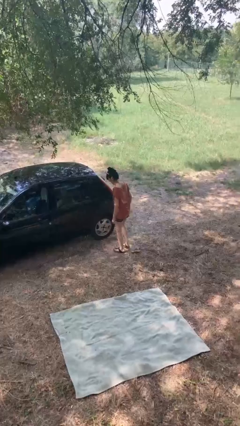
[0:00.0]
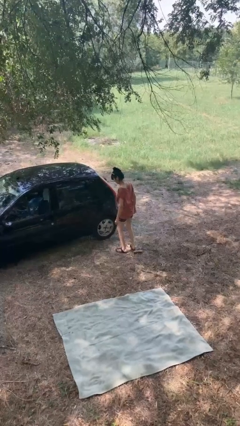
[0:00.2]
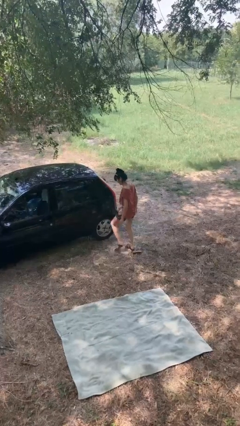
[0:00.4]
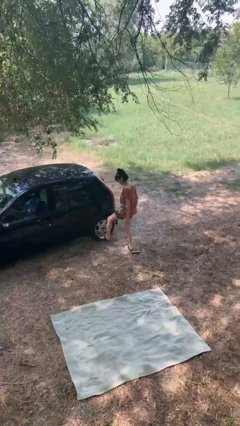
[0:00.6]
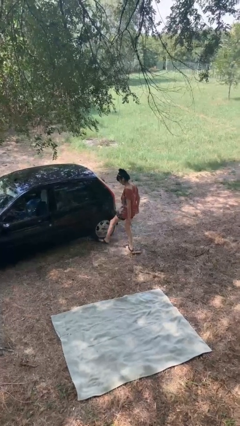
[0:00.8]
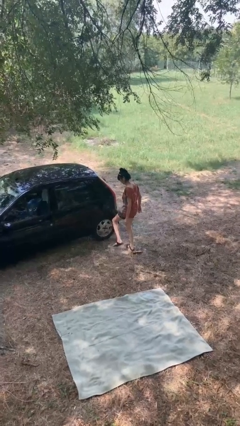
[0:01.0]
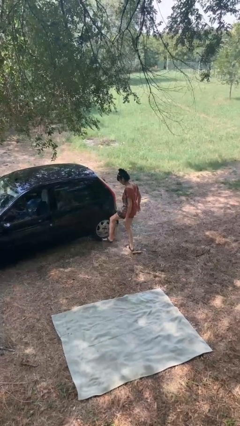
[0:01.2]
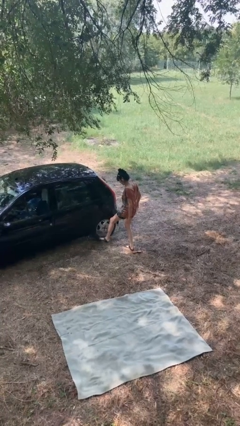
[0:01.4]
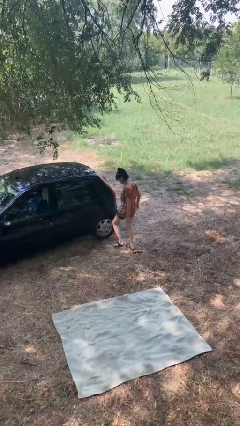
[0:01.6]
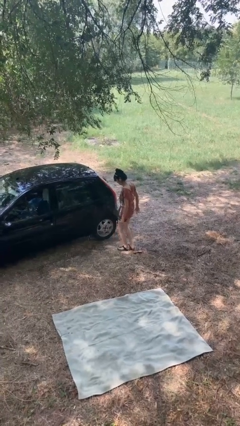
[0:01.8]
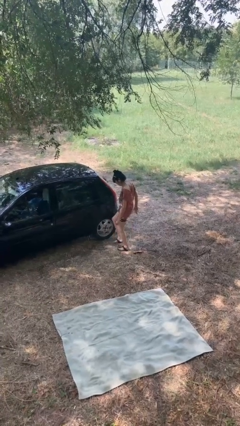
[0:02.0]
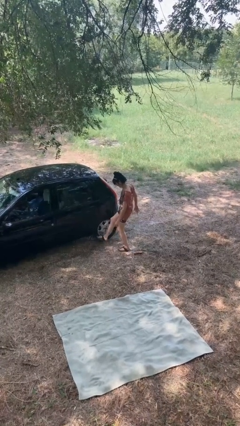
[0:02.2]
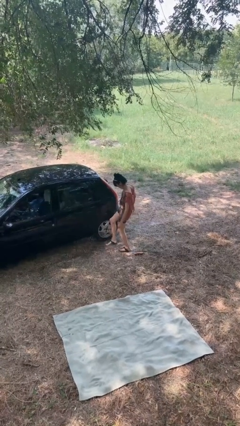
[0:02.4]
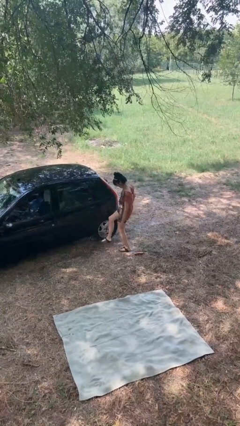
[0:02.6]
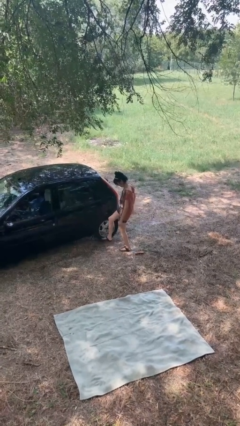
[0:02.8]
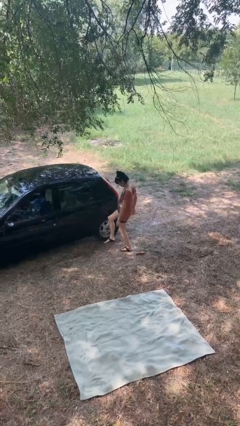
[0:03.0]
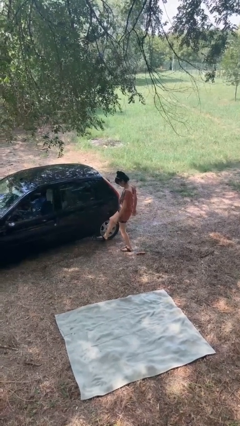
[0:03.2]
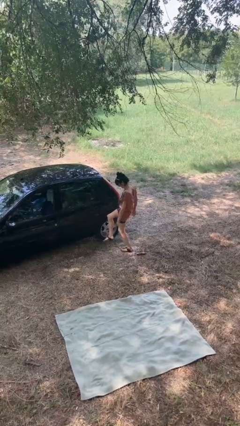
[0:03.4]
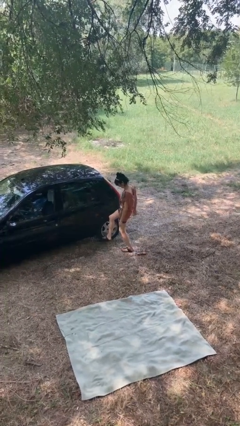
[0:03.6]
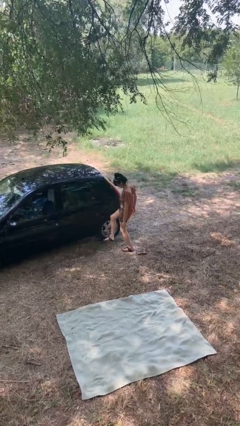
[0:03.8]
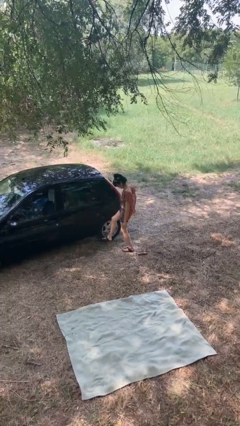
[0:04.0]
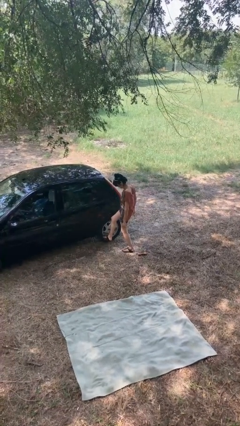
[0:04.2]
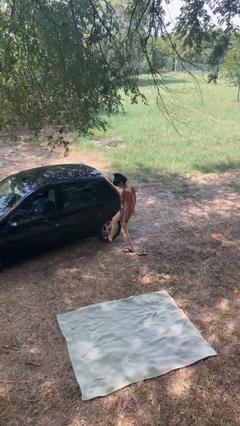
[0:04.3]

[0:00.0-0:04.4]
person kicks car tires

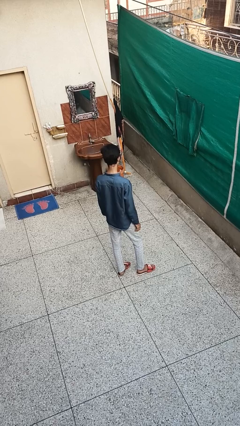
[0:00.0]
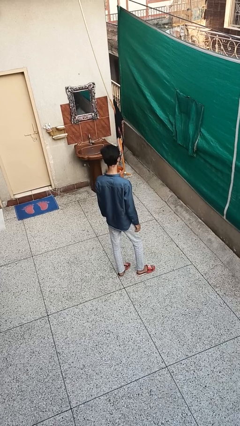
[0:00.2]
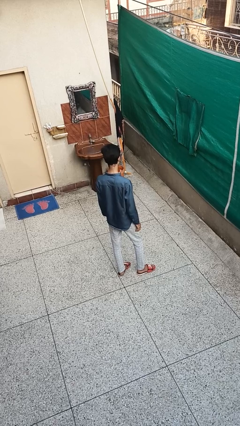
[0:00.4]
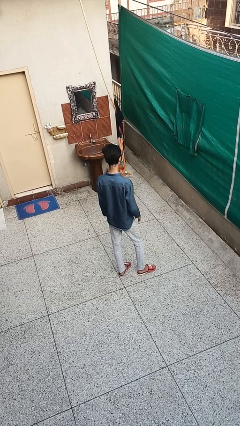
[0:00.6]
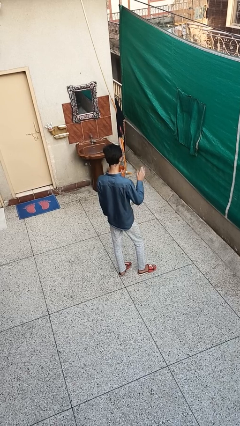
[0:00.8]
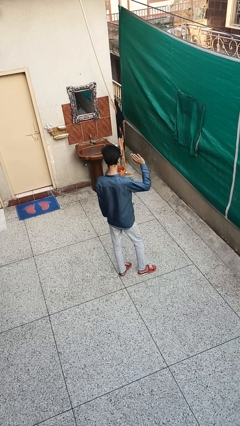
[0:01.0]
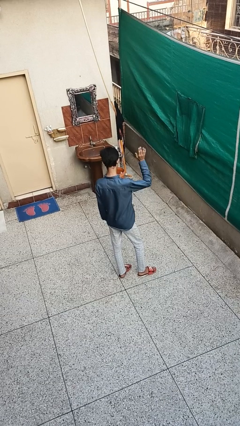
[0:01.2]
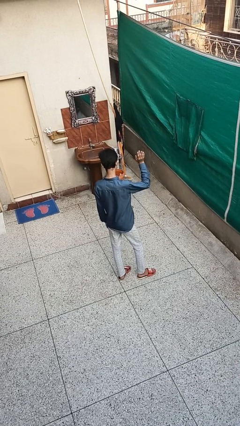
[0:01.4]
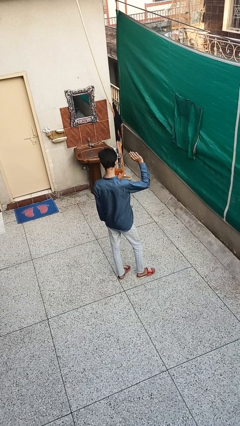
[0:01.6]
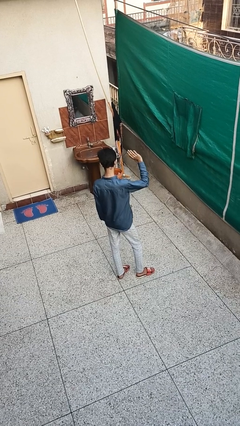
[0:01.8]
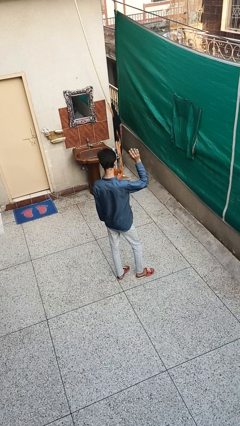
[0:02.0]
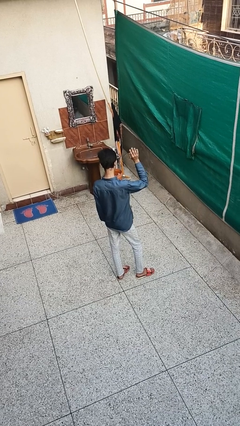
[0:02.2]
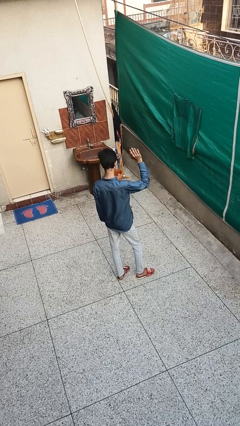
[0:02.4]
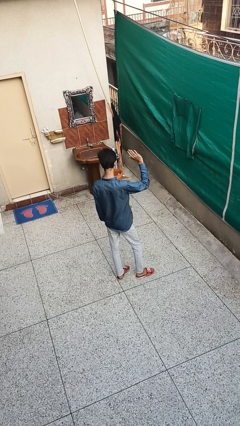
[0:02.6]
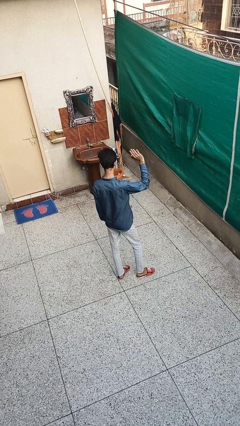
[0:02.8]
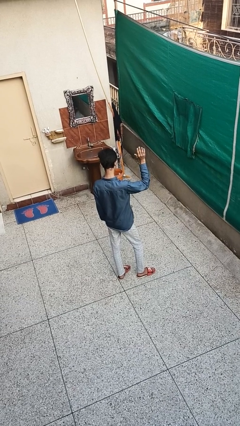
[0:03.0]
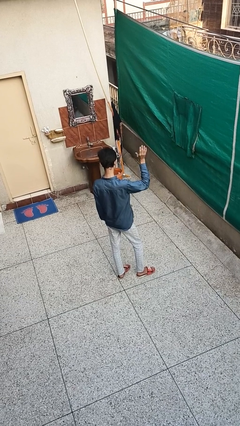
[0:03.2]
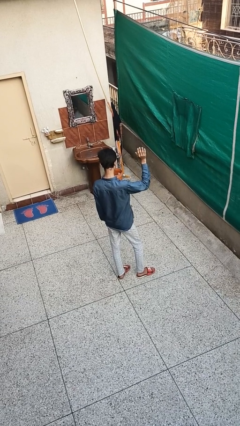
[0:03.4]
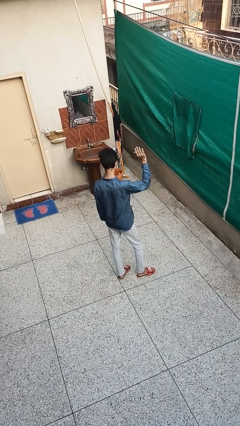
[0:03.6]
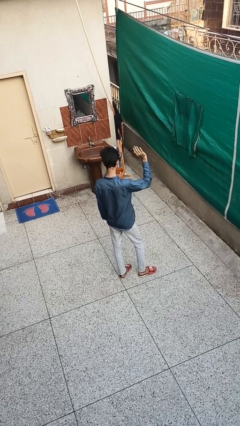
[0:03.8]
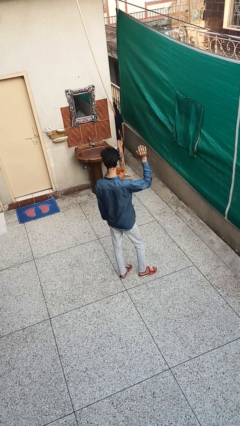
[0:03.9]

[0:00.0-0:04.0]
person waves at person

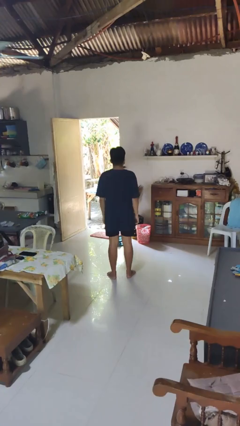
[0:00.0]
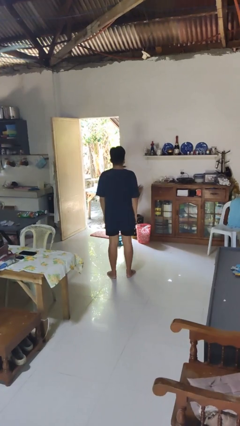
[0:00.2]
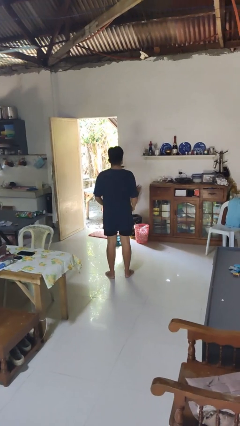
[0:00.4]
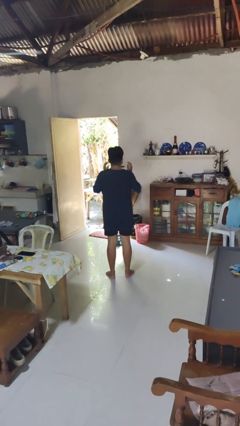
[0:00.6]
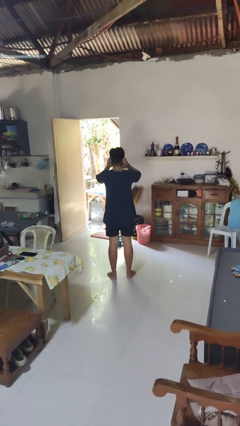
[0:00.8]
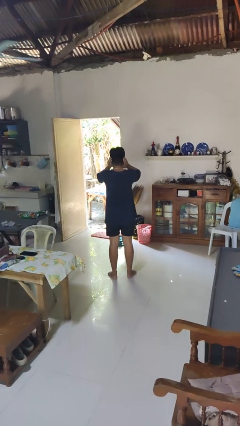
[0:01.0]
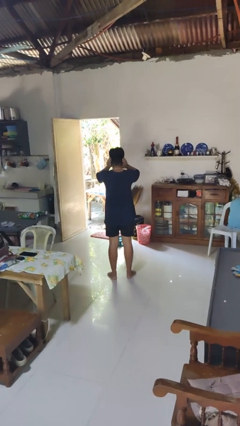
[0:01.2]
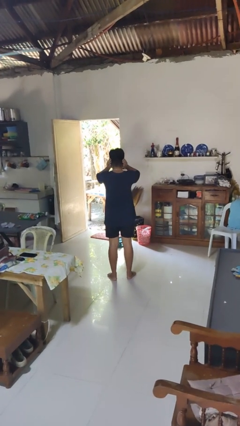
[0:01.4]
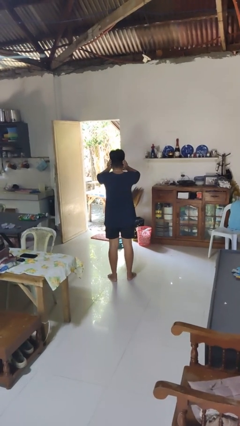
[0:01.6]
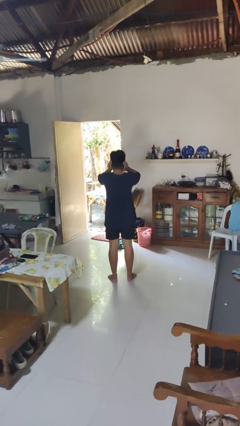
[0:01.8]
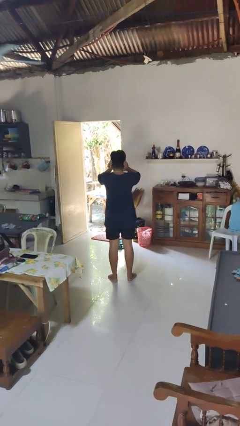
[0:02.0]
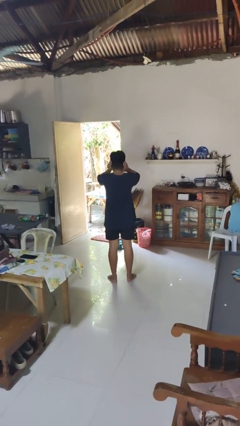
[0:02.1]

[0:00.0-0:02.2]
person puts fingers in ear

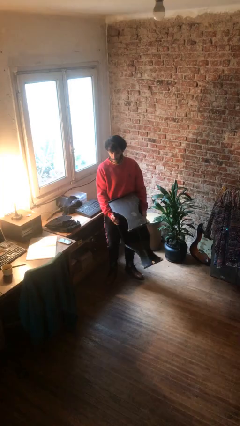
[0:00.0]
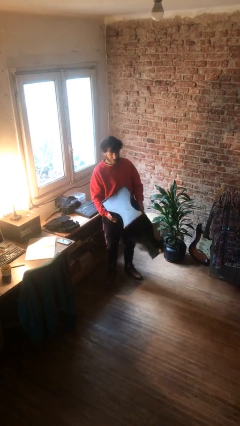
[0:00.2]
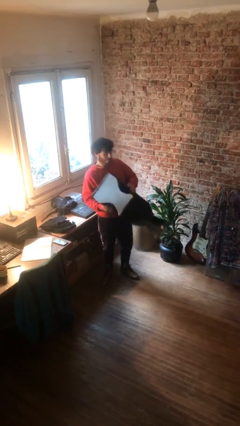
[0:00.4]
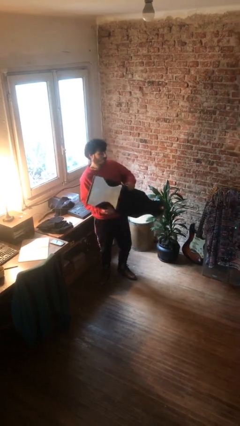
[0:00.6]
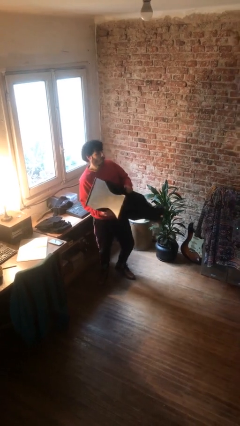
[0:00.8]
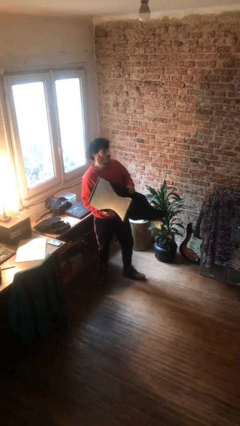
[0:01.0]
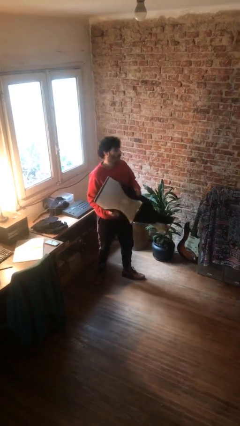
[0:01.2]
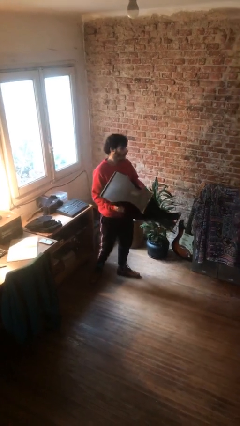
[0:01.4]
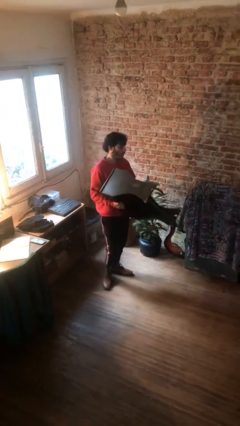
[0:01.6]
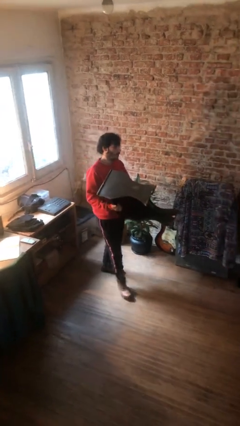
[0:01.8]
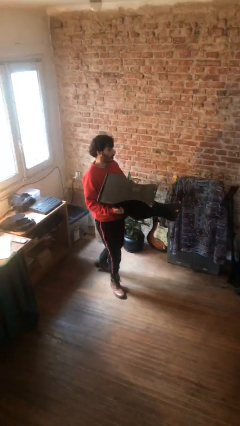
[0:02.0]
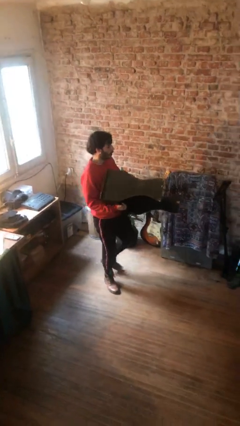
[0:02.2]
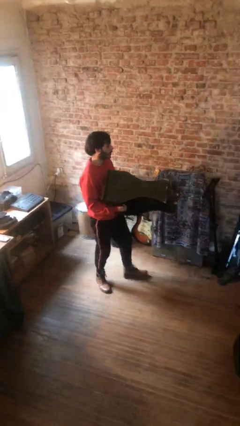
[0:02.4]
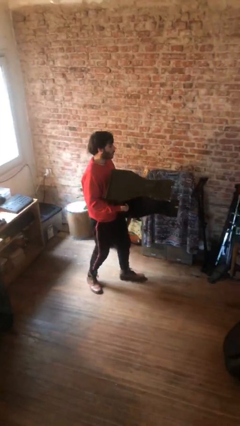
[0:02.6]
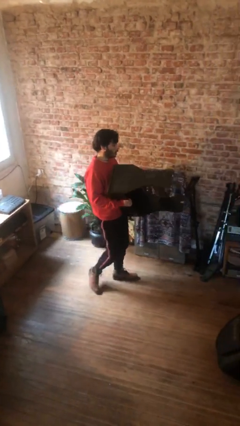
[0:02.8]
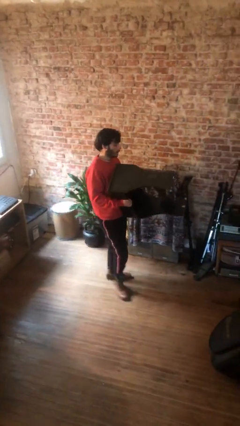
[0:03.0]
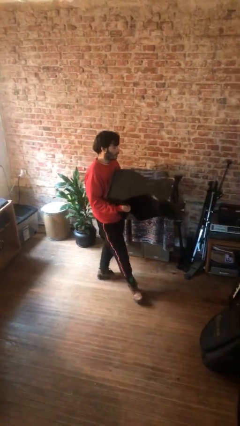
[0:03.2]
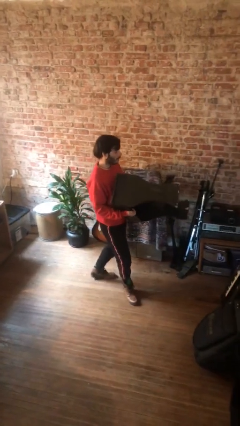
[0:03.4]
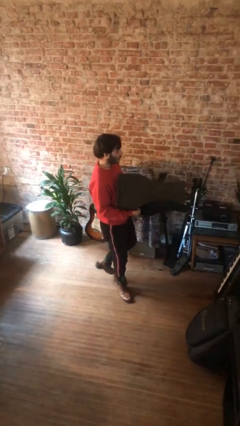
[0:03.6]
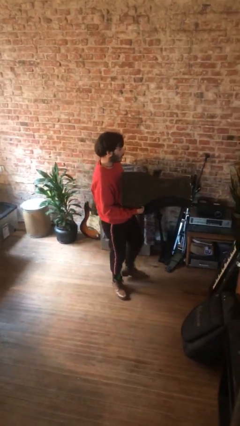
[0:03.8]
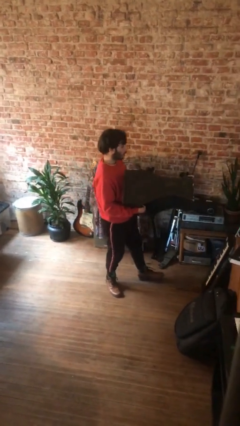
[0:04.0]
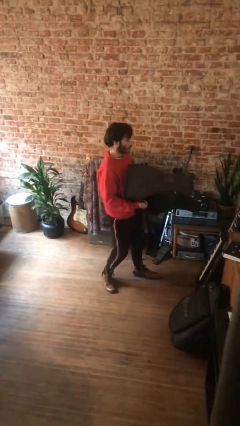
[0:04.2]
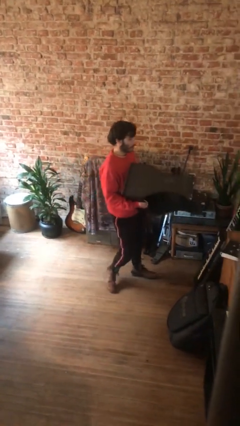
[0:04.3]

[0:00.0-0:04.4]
person carries furniture

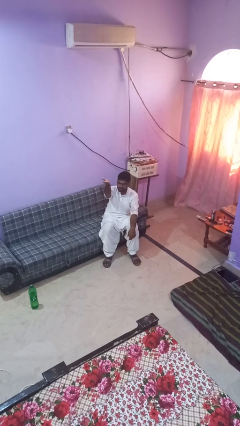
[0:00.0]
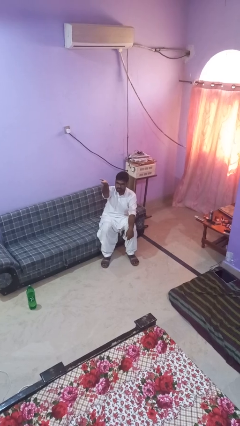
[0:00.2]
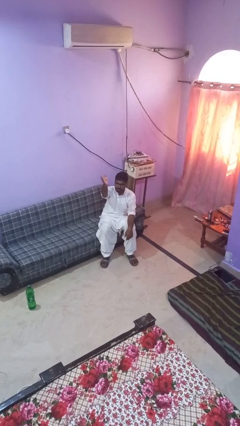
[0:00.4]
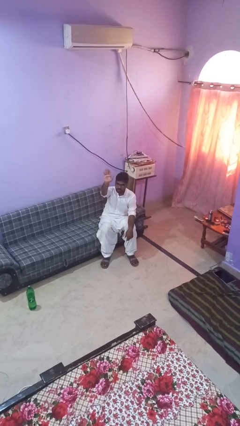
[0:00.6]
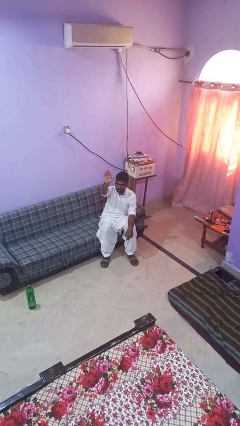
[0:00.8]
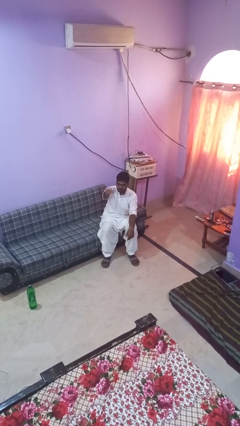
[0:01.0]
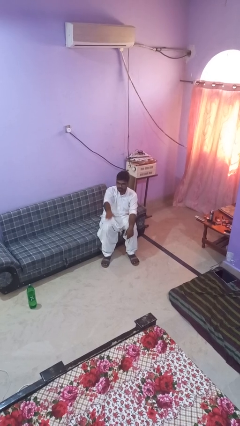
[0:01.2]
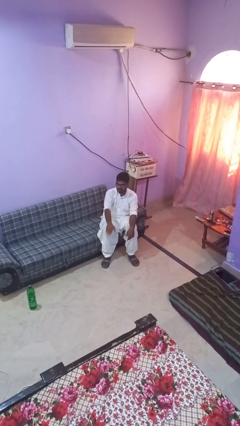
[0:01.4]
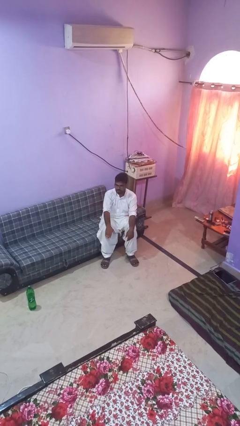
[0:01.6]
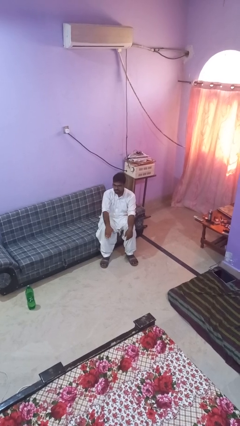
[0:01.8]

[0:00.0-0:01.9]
person gestures swipe down

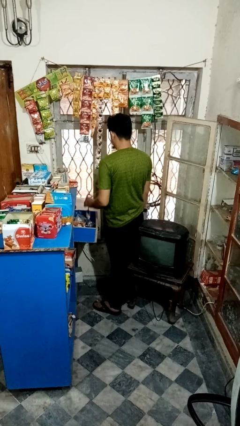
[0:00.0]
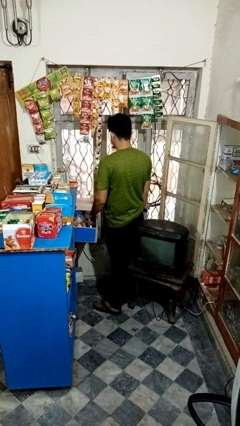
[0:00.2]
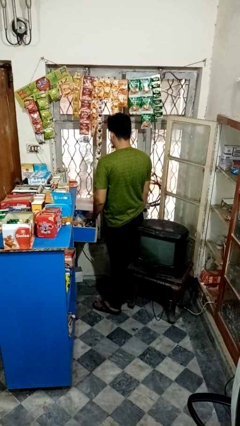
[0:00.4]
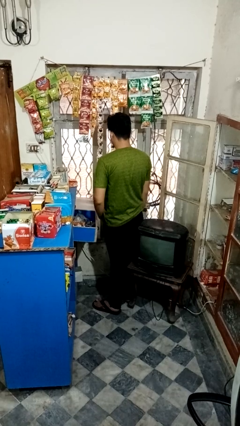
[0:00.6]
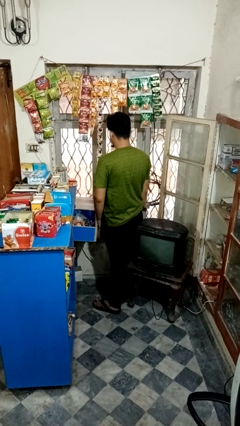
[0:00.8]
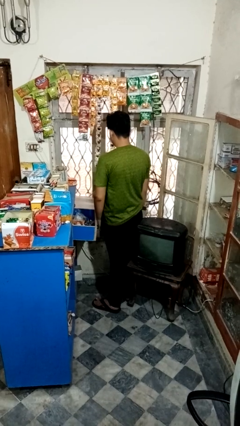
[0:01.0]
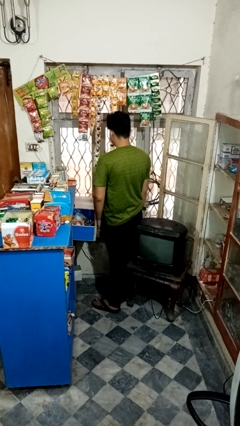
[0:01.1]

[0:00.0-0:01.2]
person puts object into kitchen drawer
